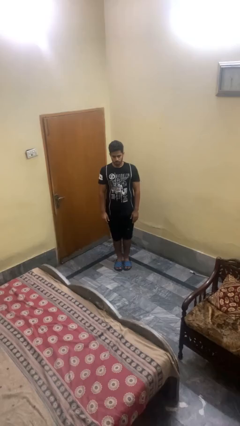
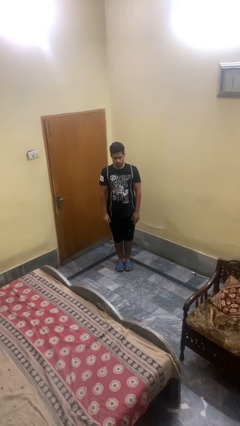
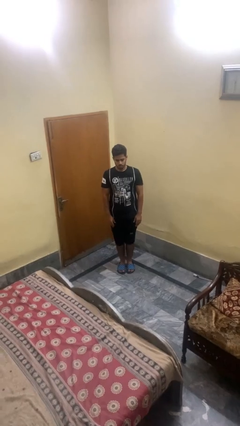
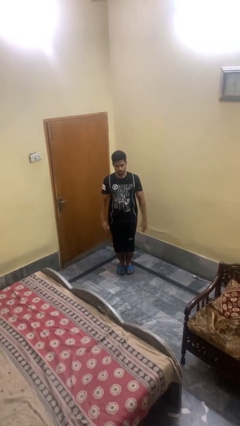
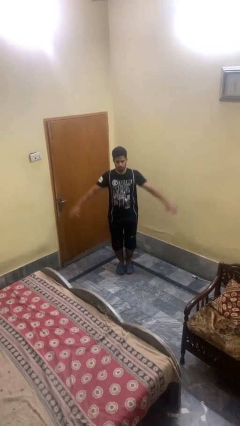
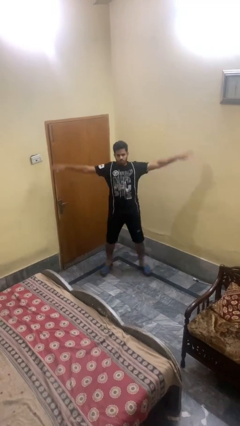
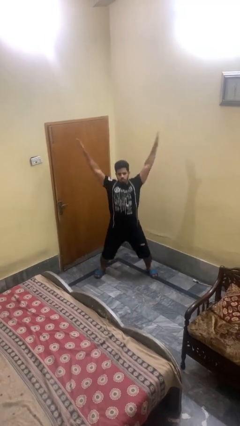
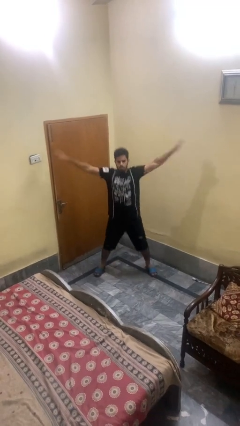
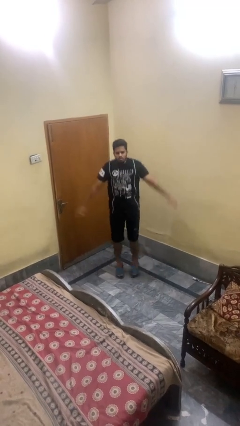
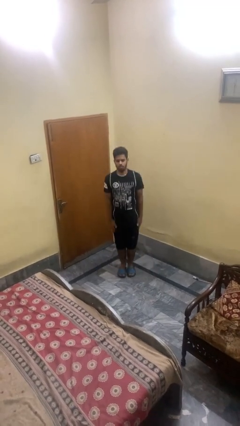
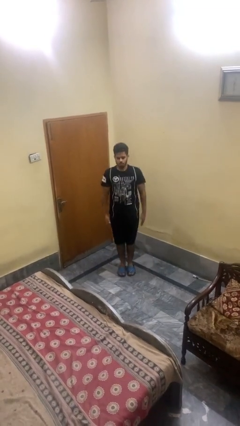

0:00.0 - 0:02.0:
person exercises with jumping jacks

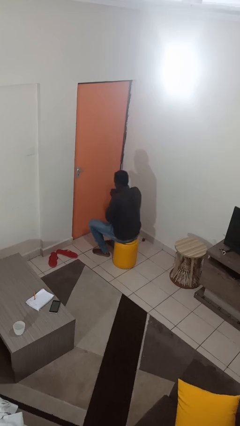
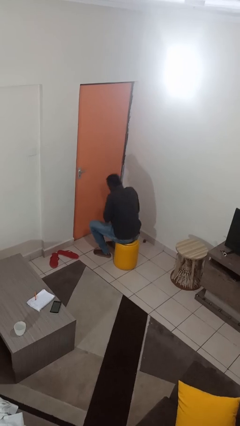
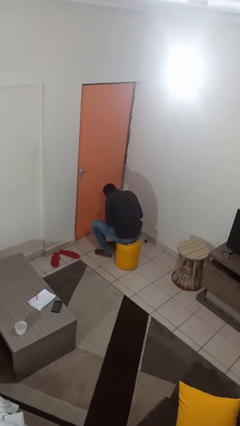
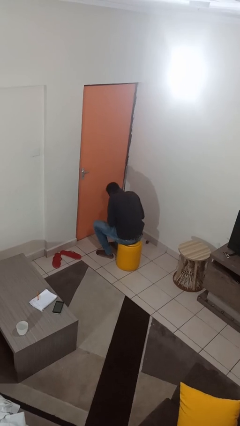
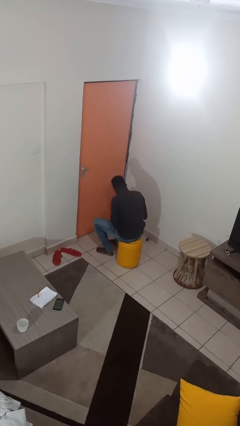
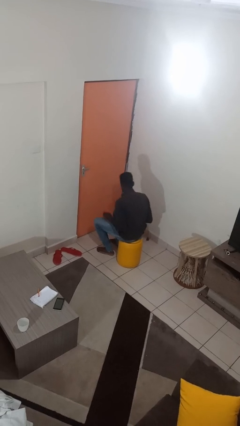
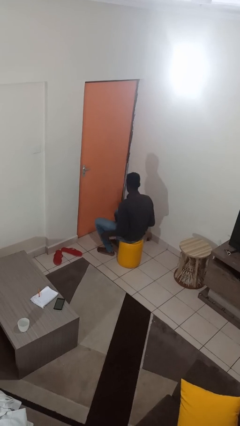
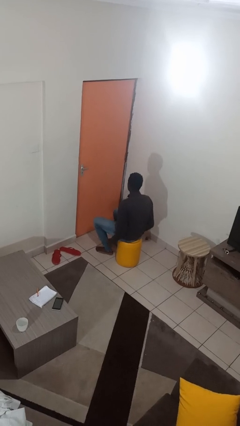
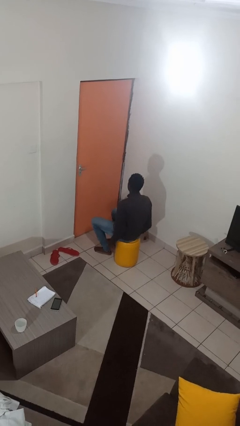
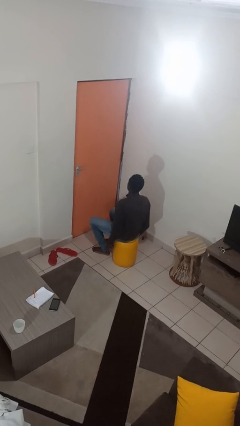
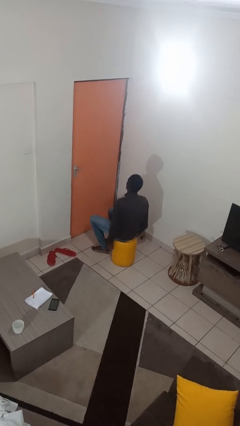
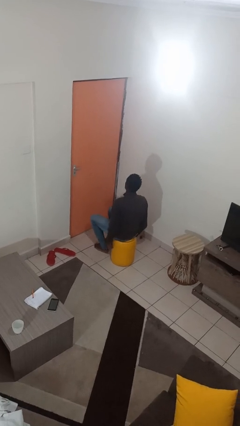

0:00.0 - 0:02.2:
person sneezes into hand

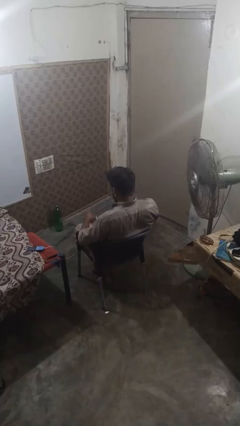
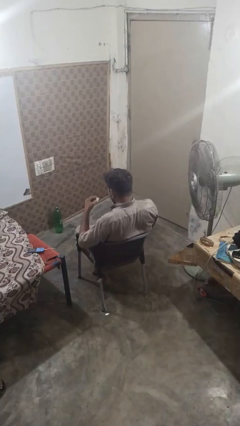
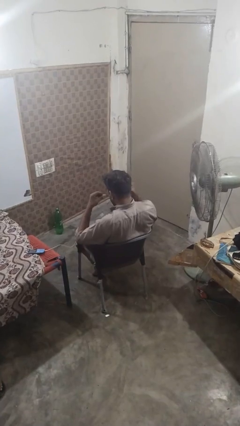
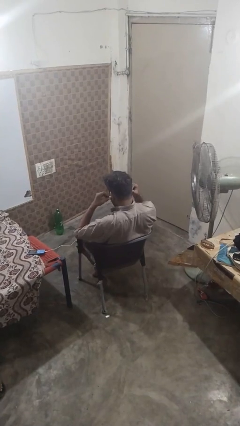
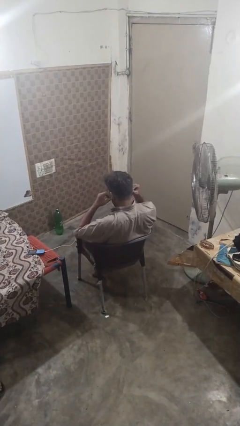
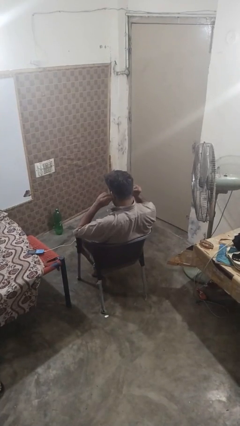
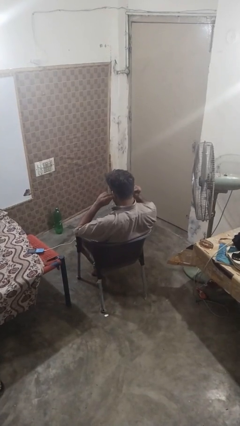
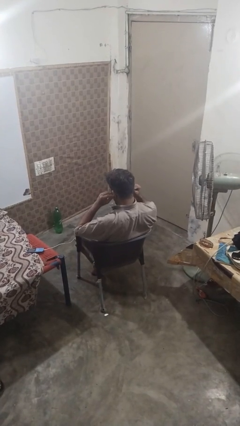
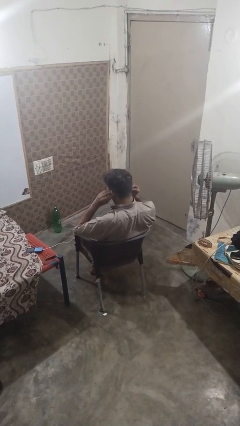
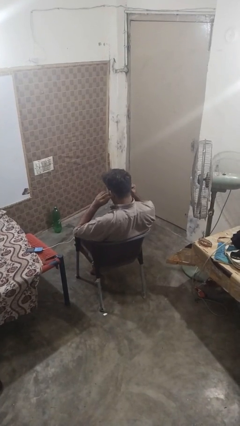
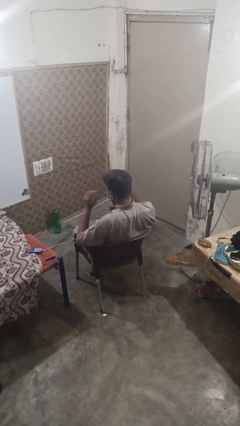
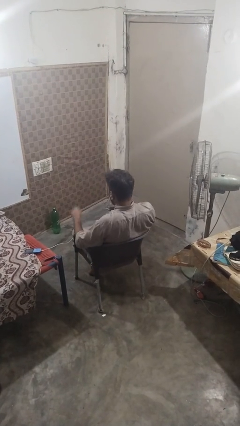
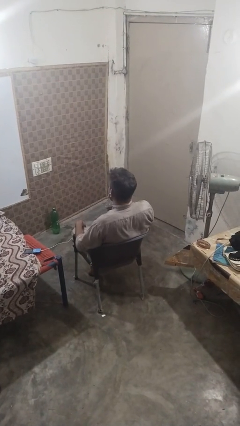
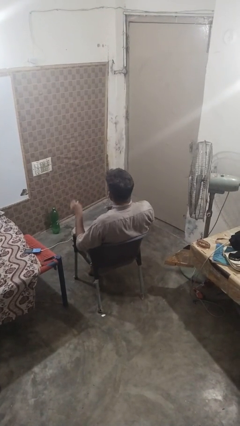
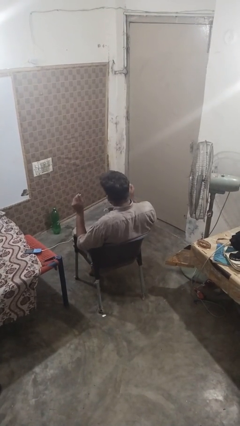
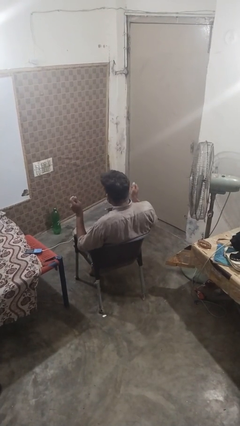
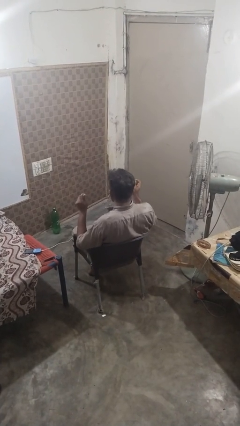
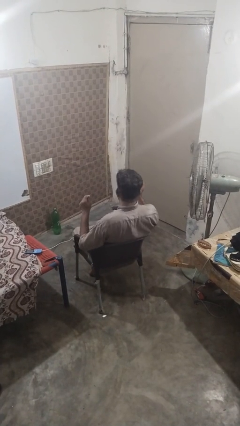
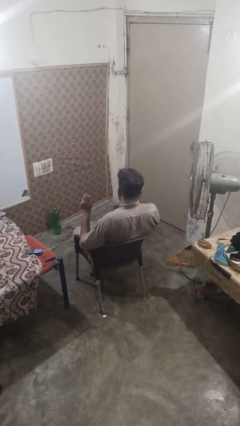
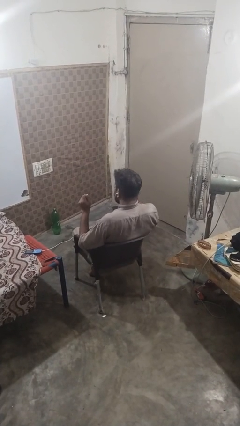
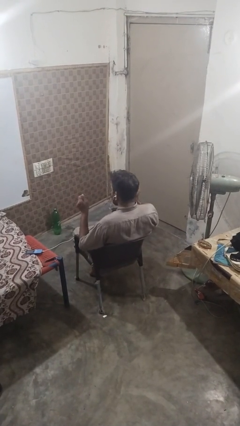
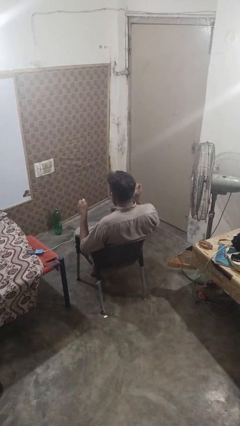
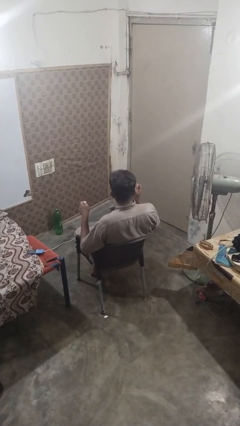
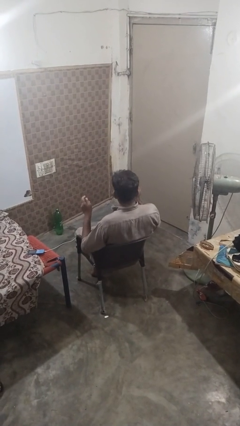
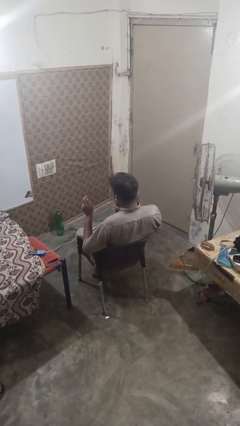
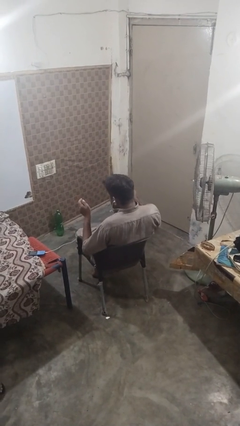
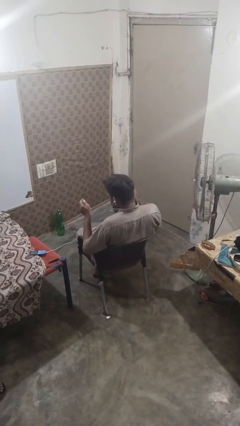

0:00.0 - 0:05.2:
person puts on headphones

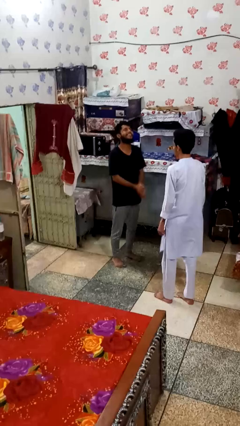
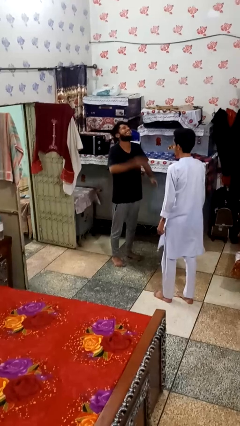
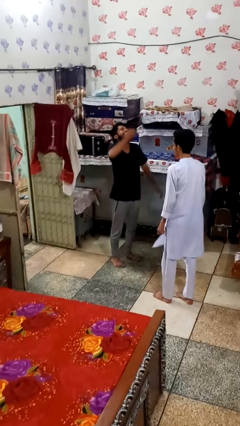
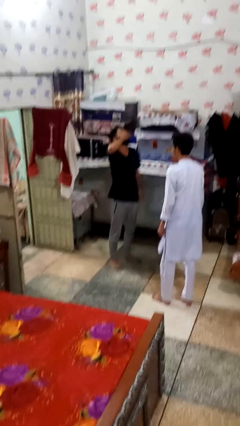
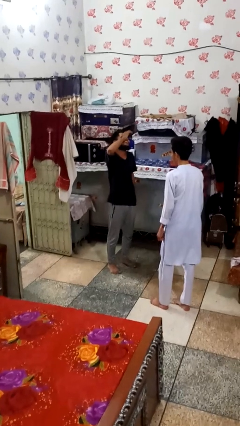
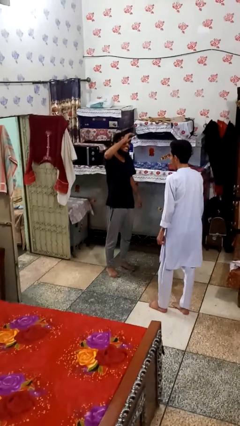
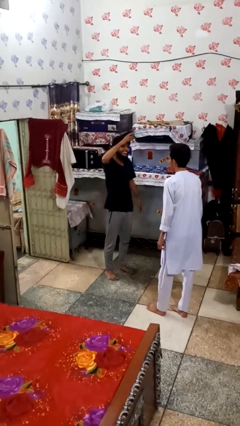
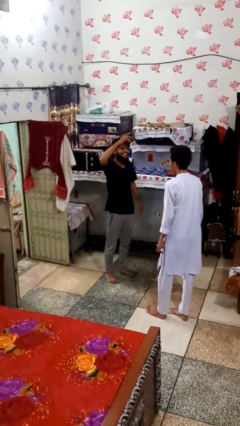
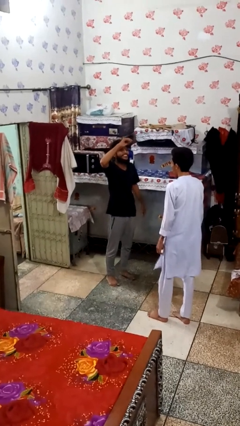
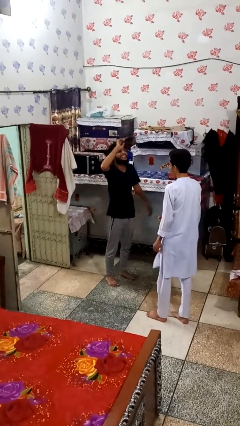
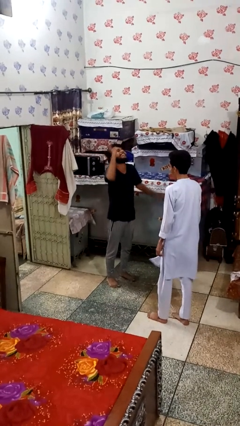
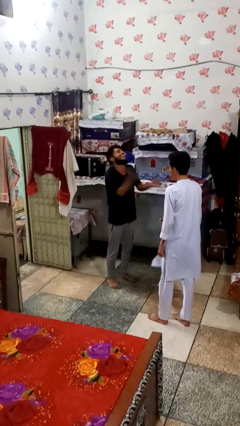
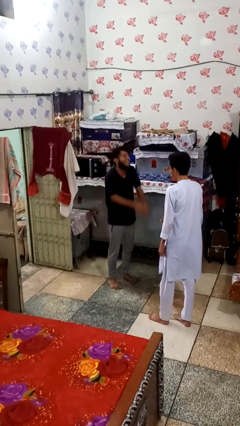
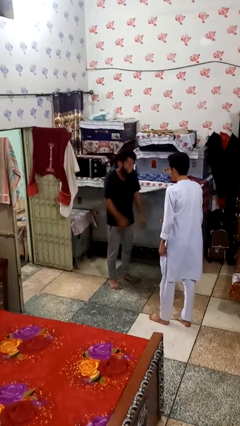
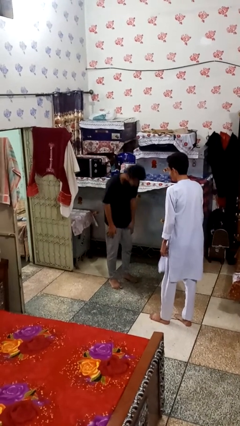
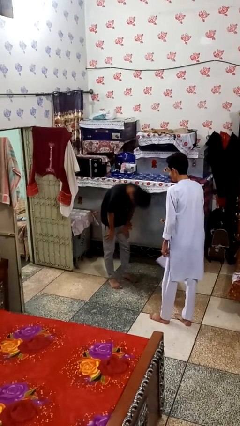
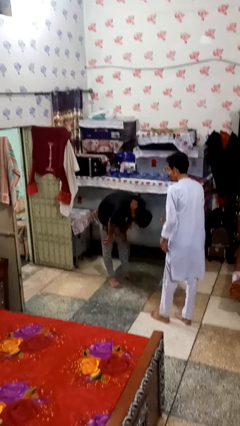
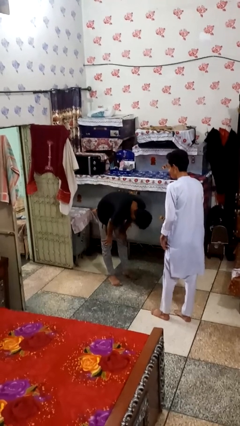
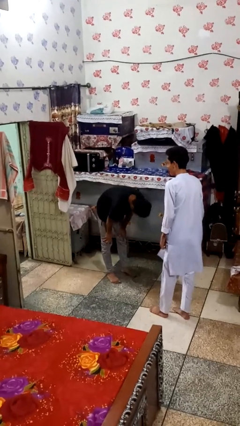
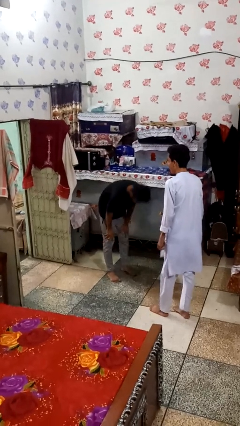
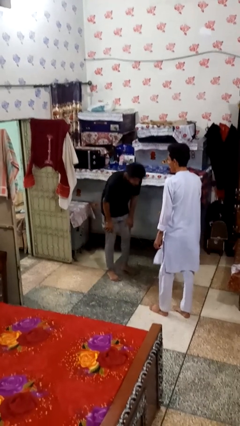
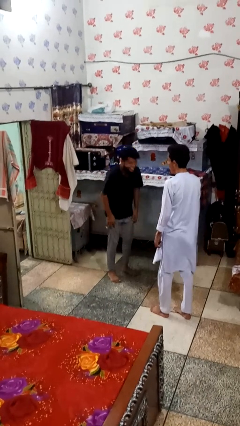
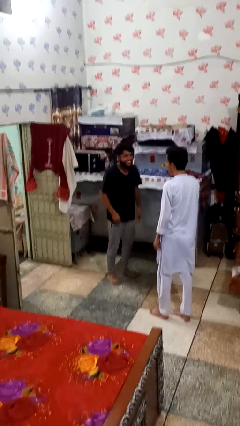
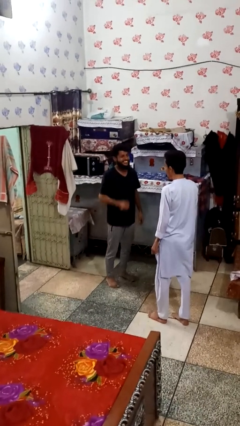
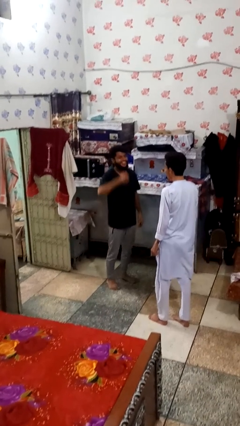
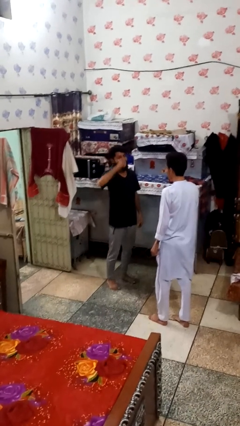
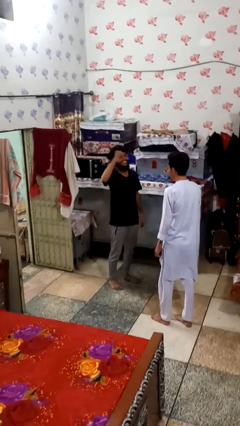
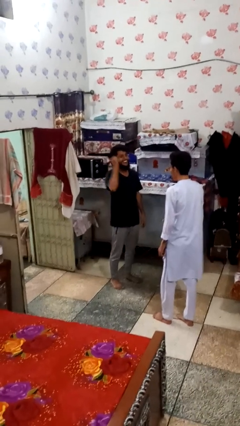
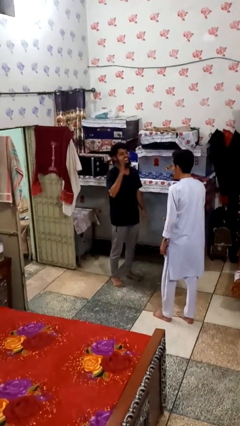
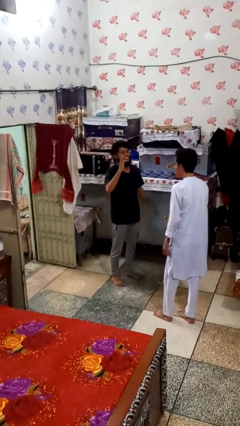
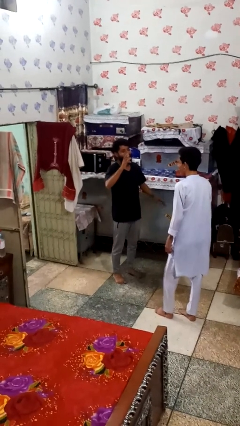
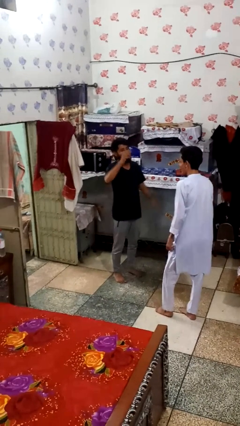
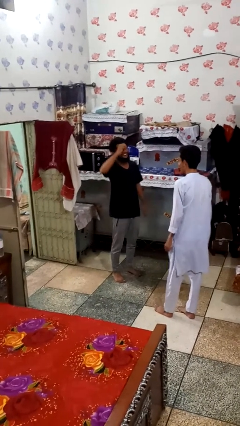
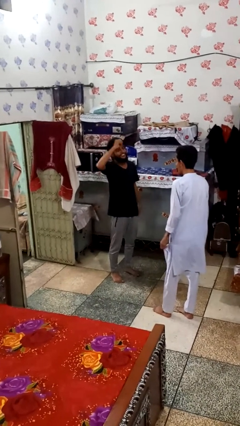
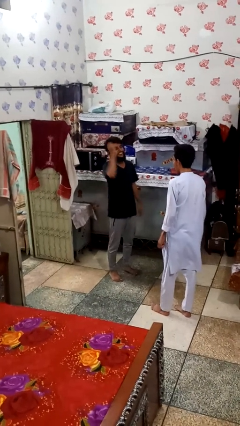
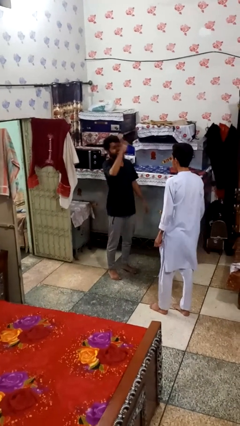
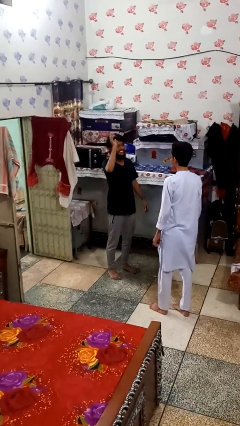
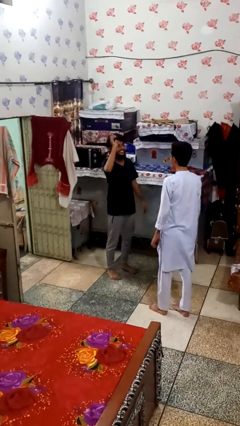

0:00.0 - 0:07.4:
person laughs with person

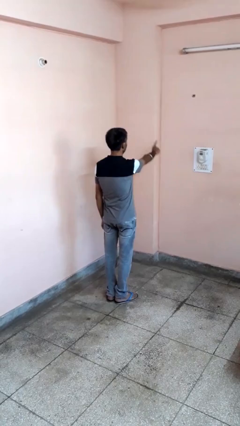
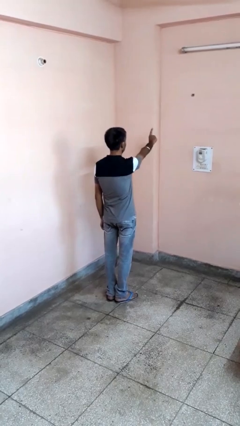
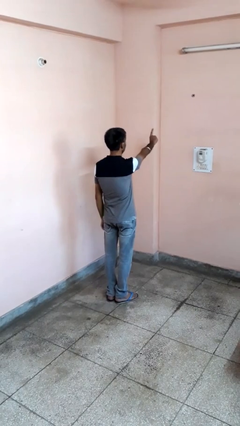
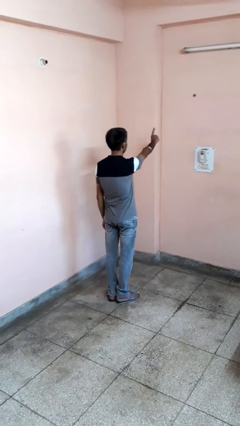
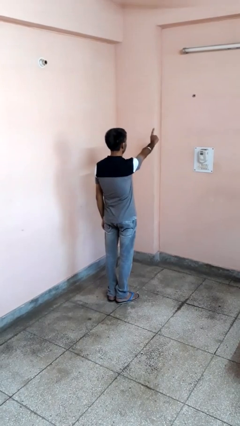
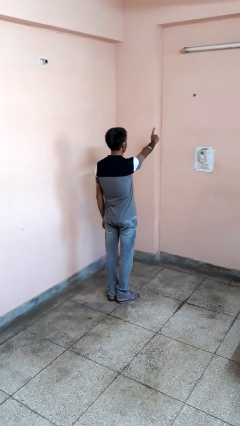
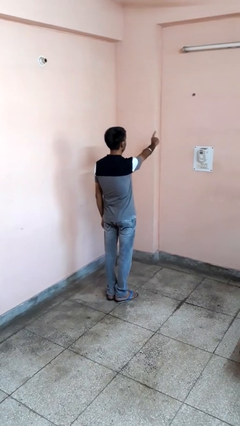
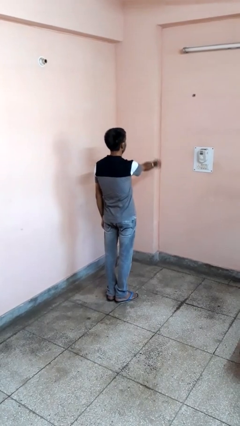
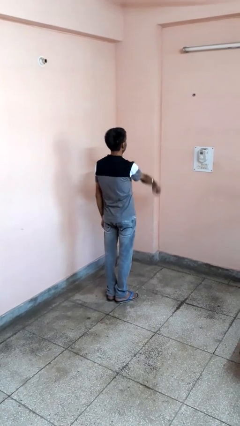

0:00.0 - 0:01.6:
person gestures number one
